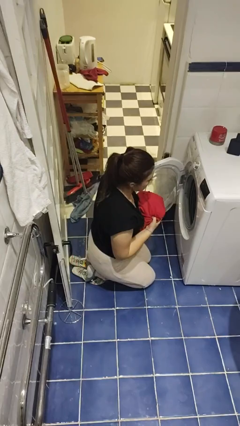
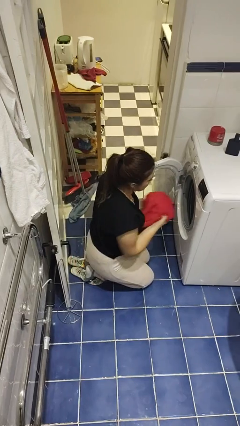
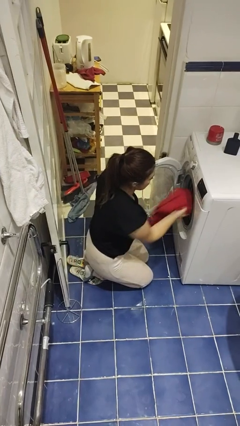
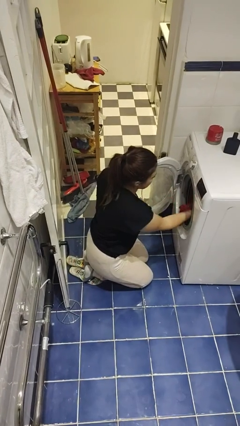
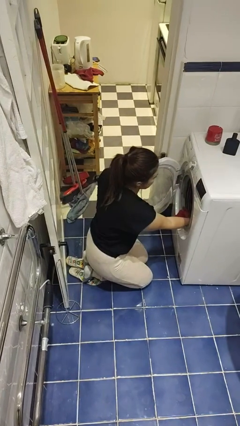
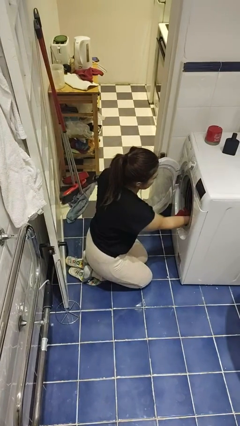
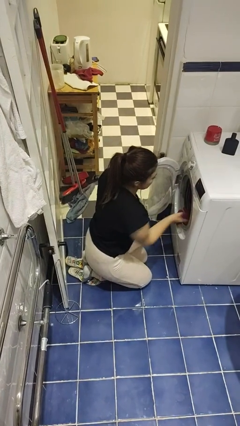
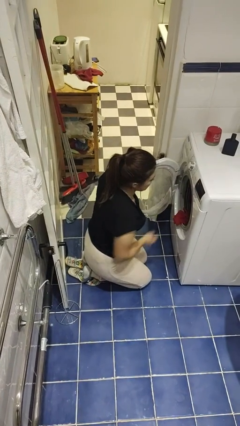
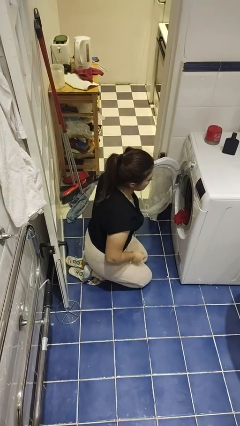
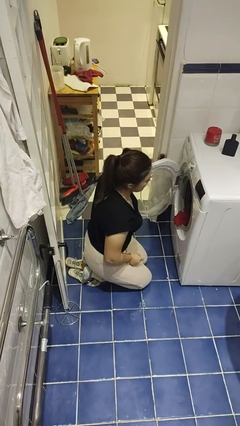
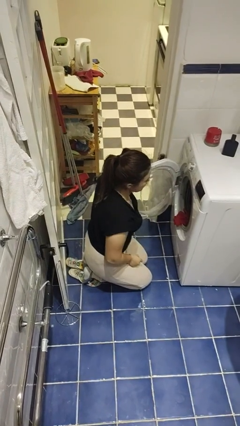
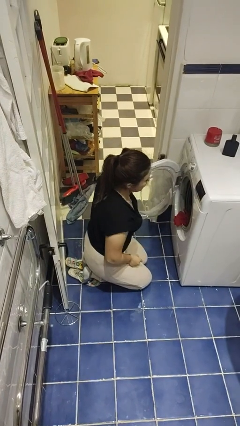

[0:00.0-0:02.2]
person loads dryer

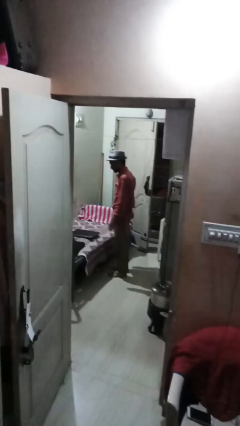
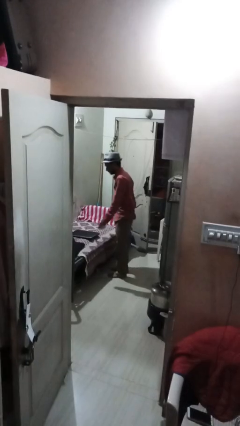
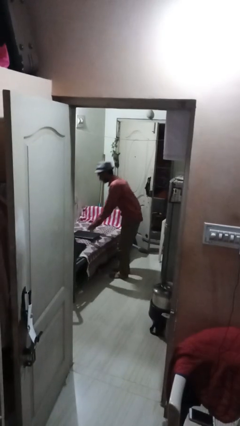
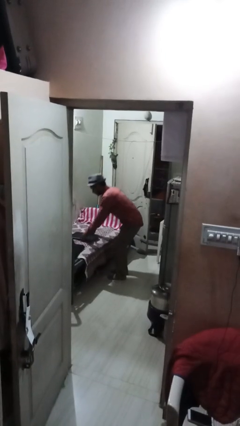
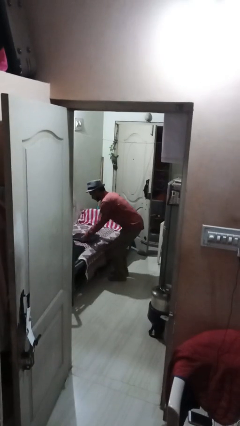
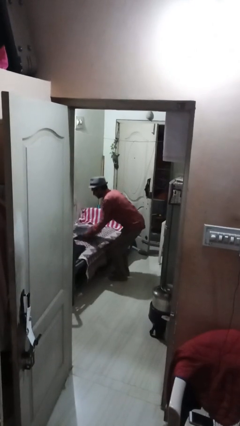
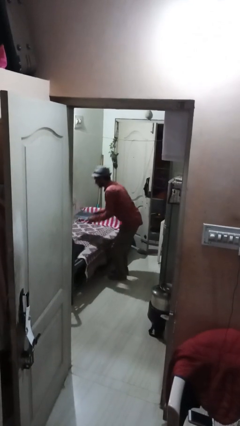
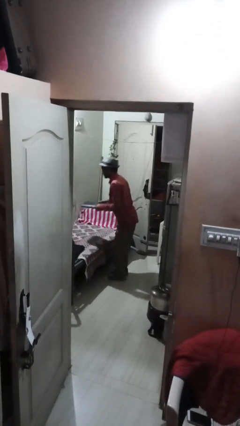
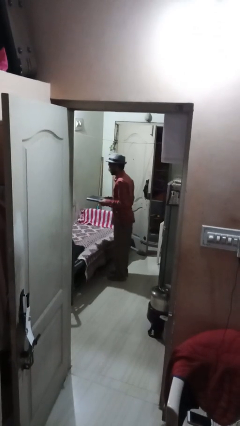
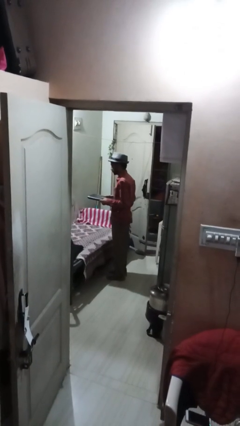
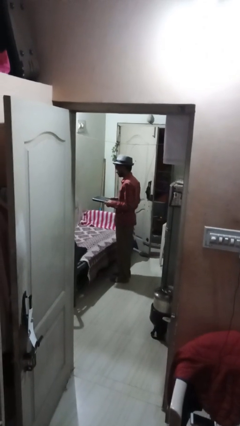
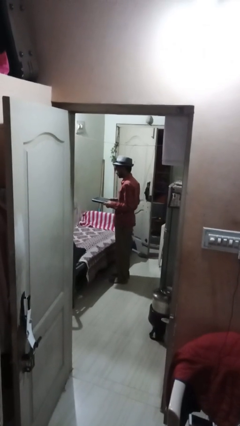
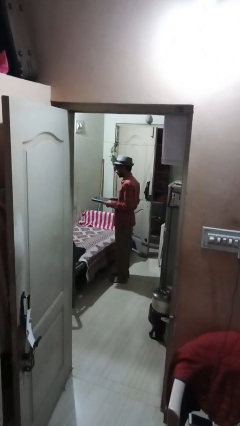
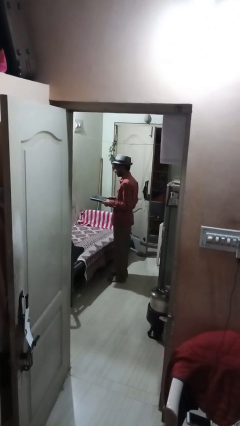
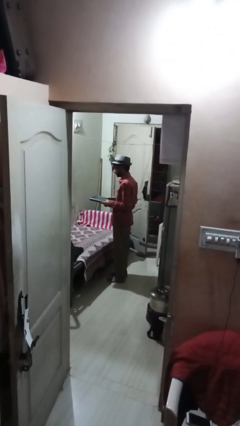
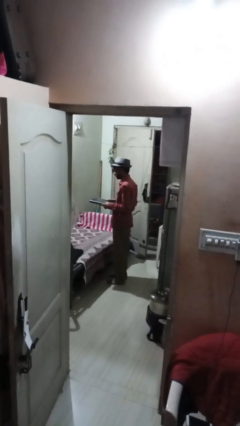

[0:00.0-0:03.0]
person picks up object from couch

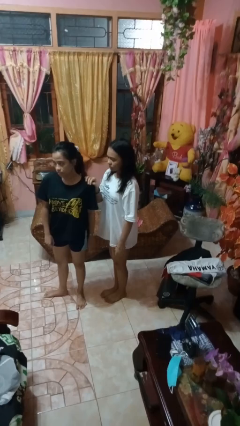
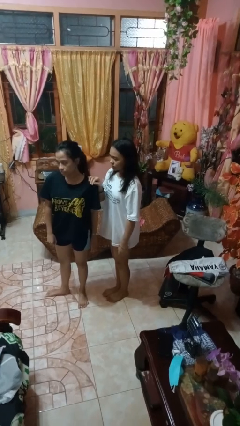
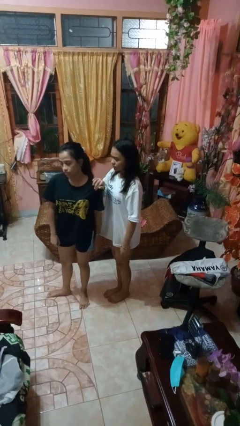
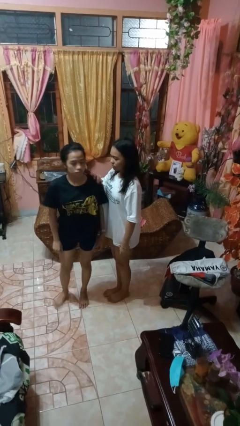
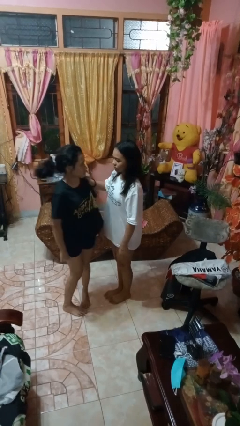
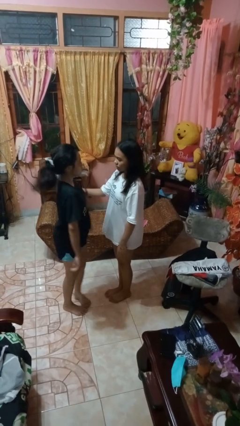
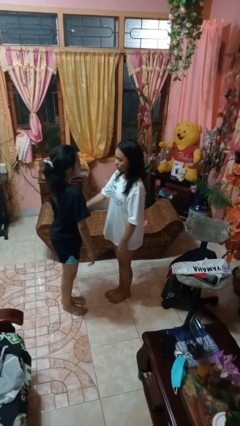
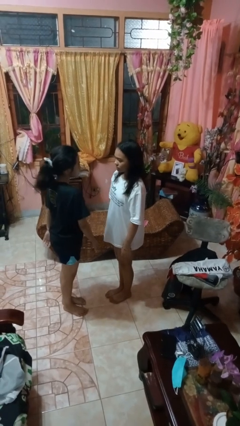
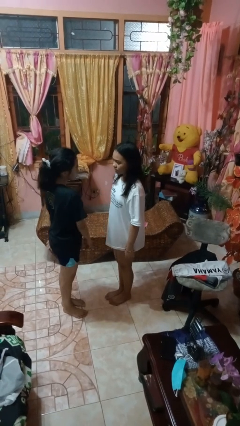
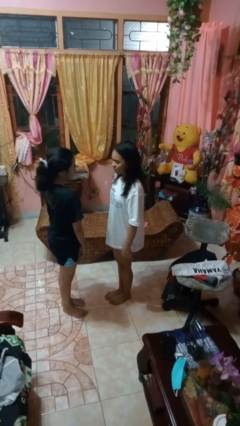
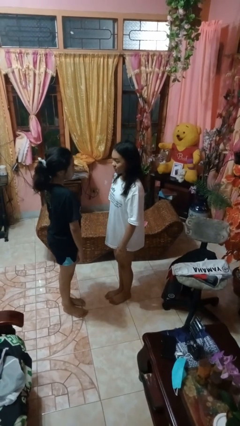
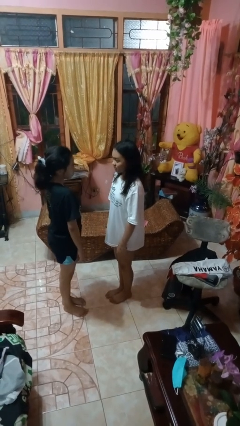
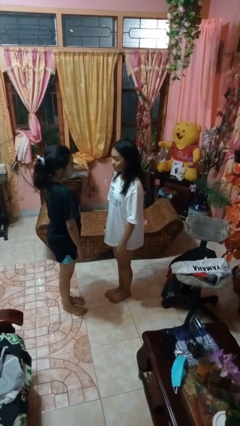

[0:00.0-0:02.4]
person spins person around

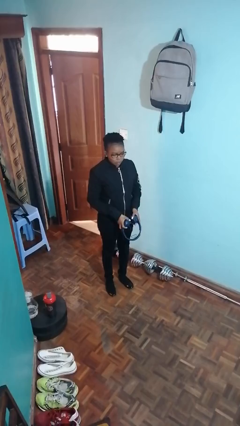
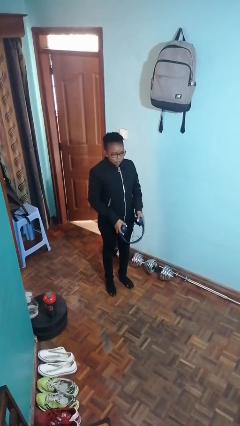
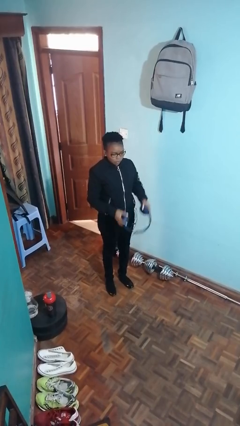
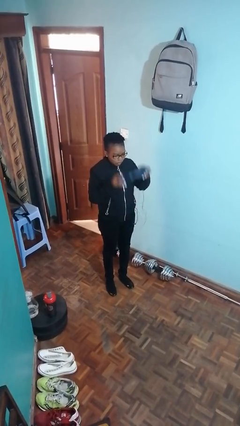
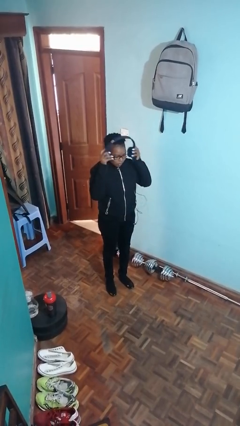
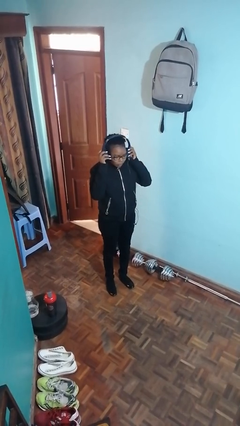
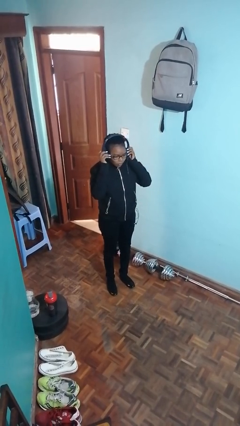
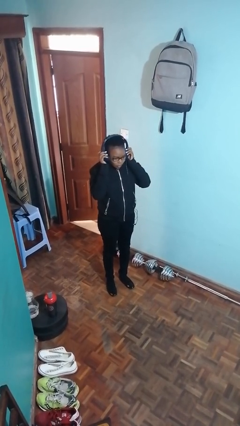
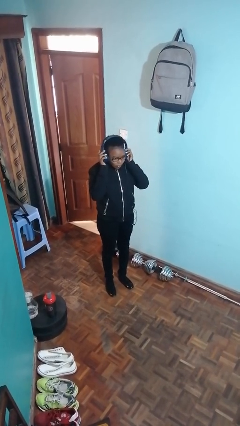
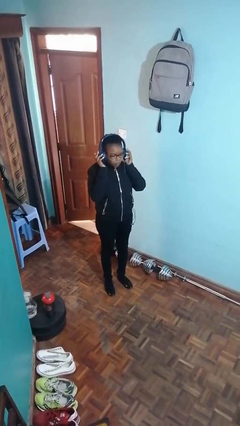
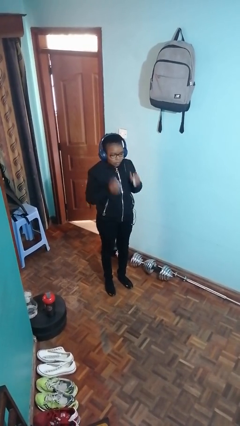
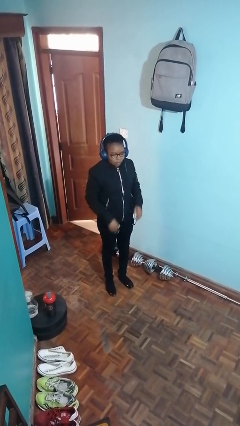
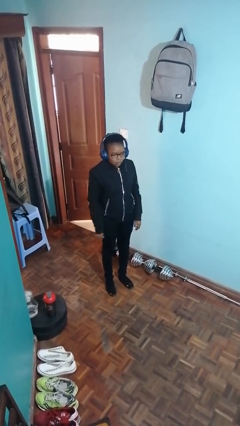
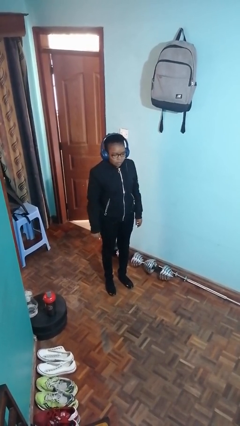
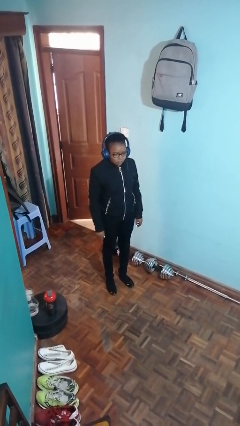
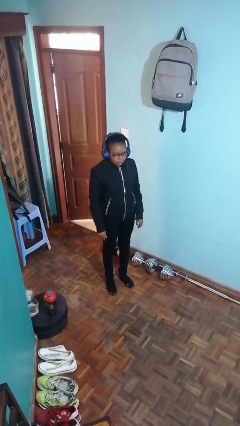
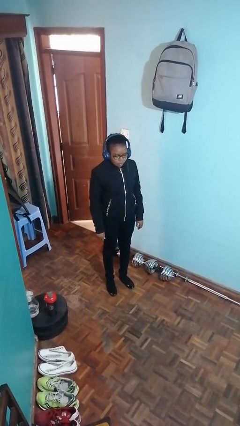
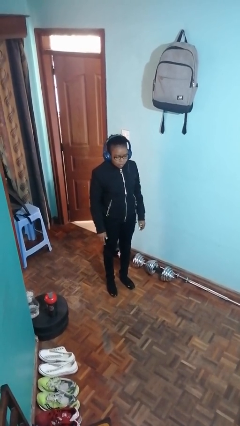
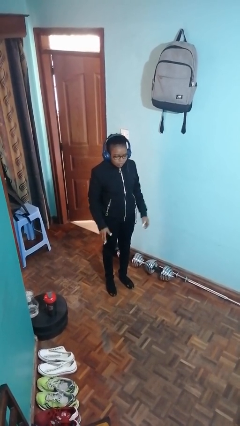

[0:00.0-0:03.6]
person puts on headphones

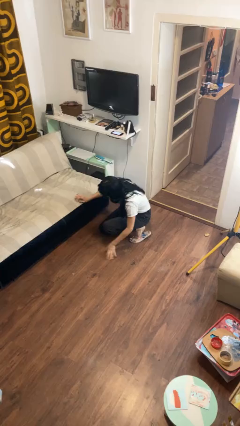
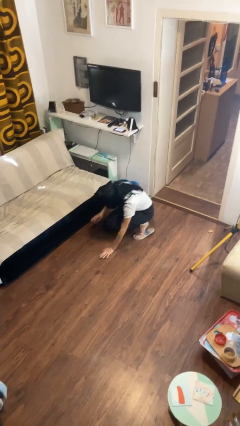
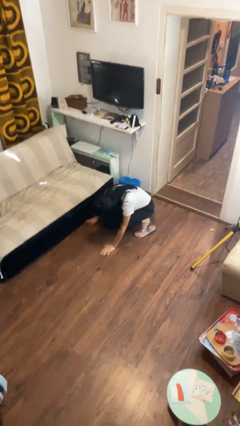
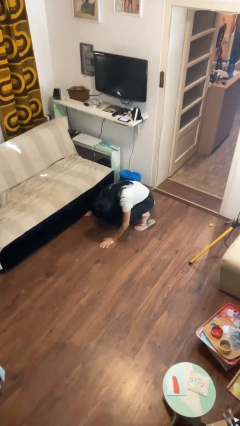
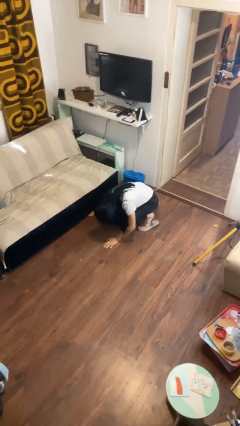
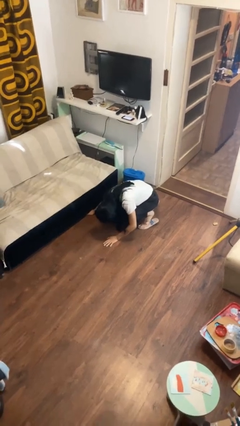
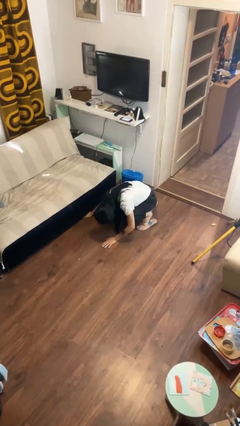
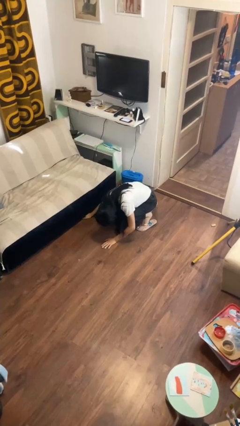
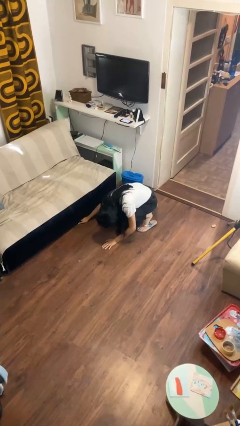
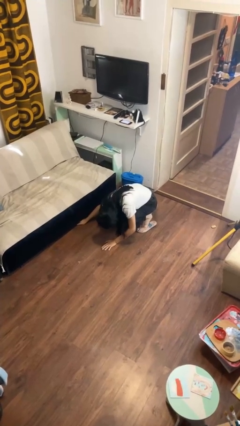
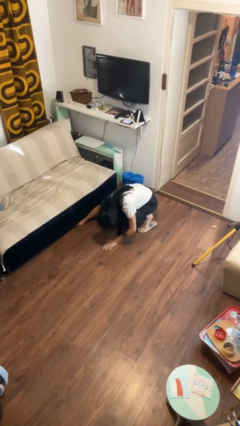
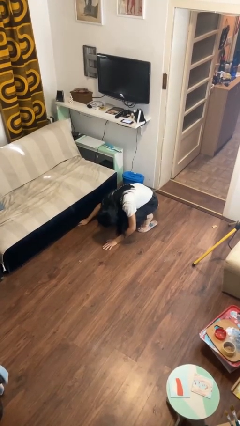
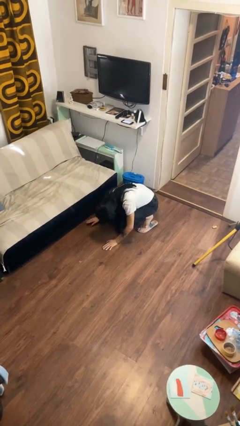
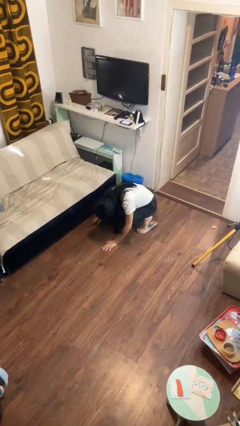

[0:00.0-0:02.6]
person searches under couch

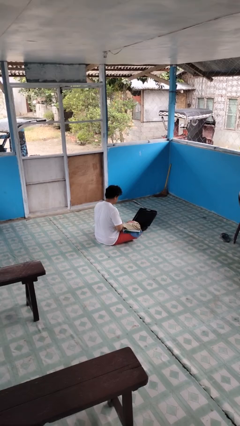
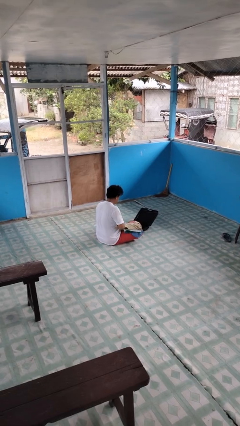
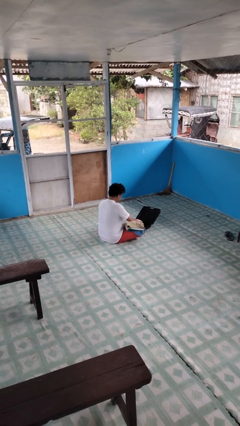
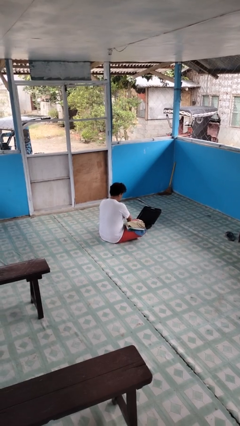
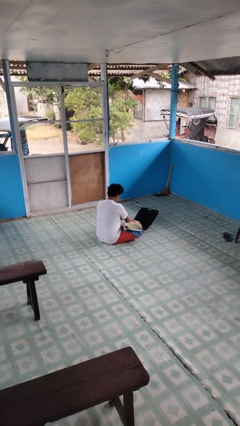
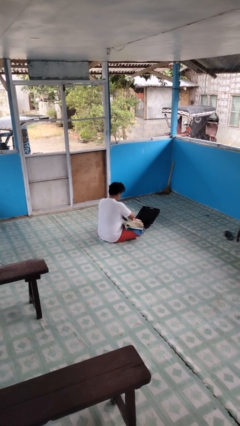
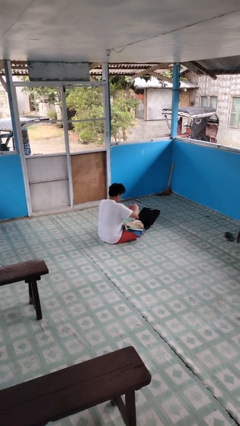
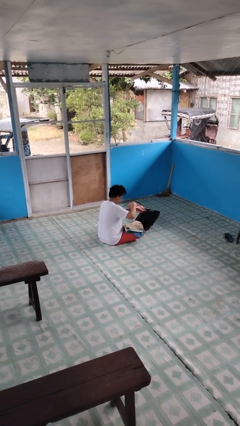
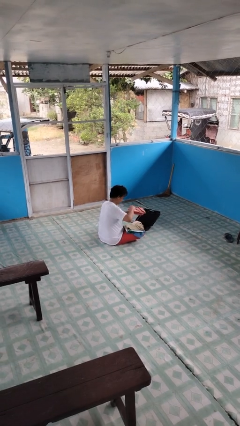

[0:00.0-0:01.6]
person unloads clothes from suitcase

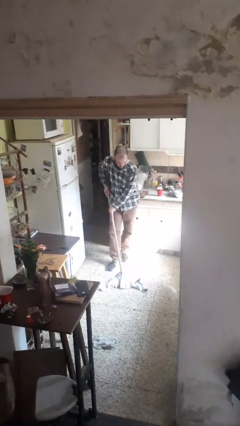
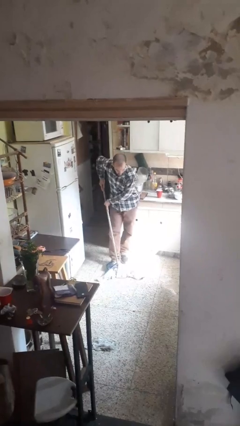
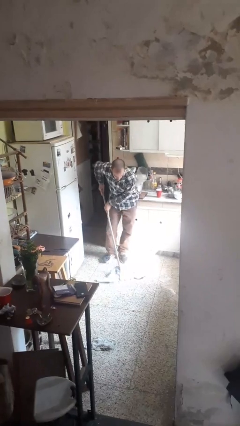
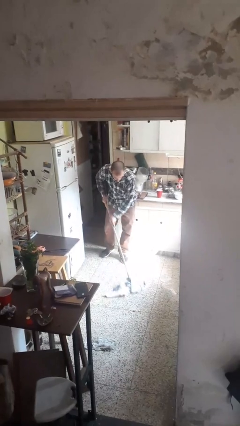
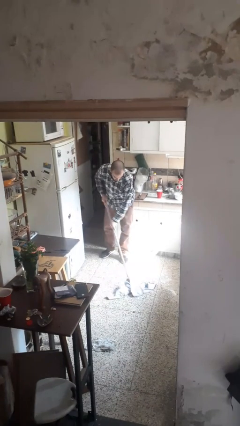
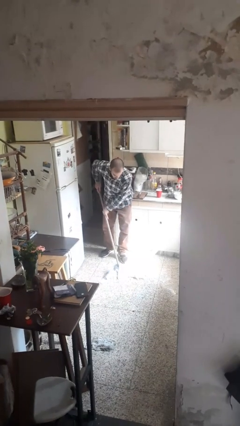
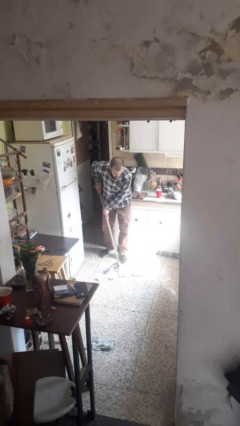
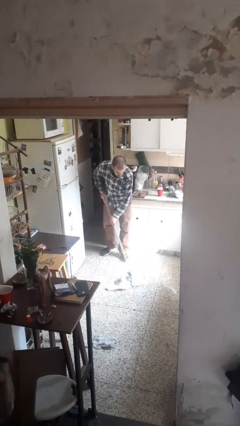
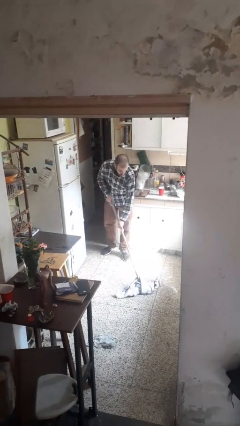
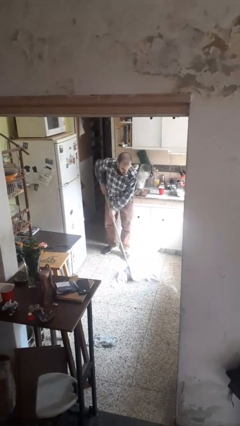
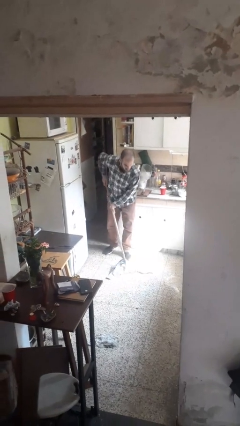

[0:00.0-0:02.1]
person mops
